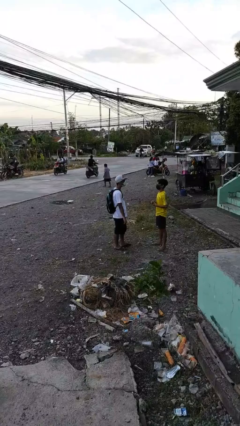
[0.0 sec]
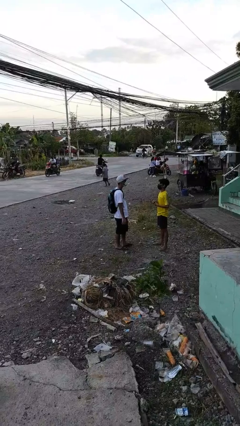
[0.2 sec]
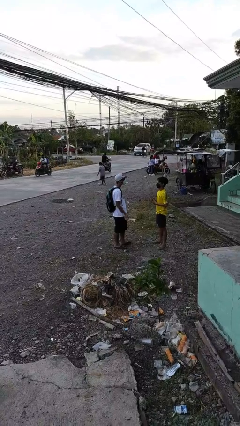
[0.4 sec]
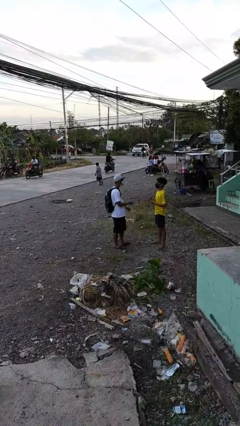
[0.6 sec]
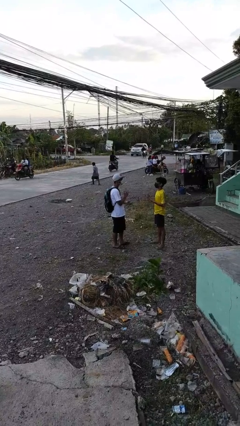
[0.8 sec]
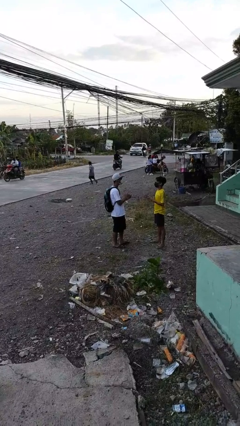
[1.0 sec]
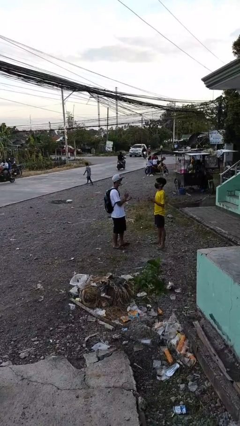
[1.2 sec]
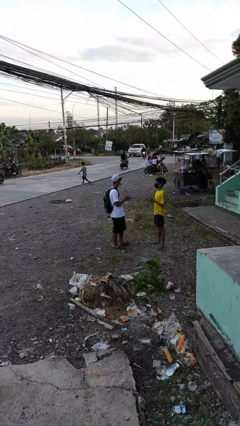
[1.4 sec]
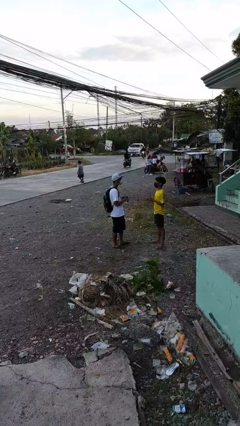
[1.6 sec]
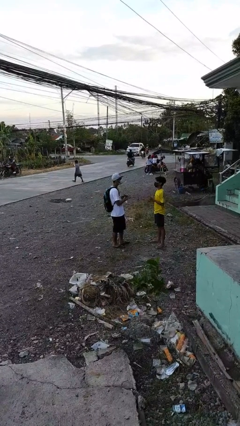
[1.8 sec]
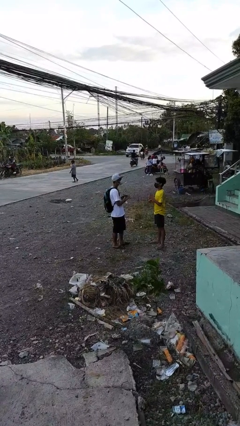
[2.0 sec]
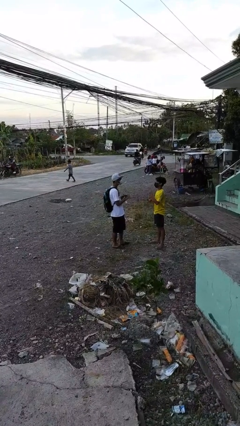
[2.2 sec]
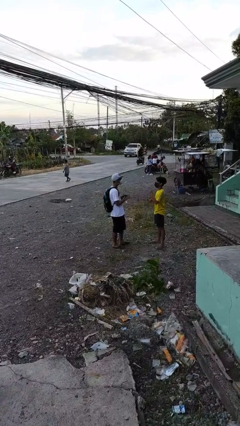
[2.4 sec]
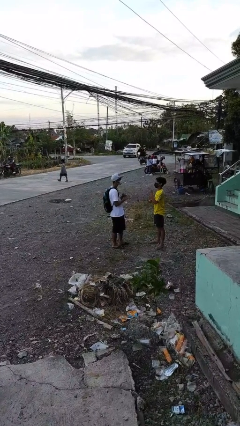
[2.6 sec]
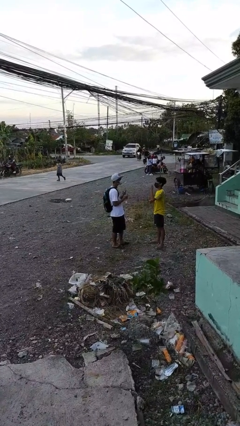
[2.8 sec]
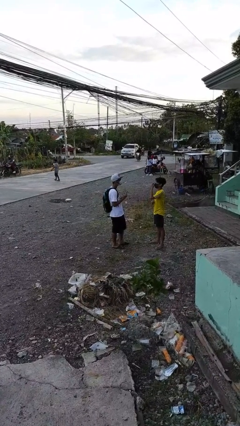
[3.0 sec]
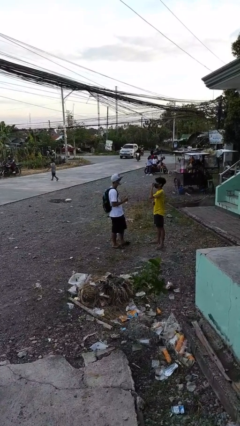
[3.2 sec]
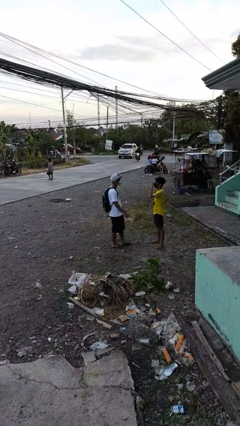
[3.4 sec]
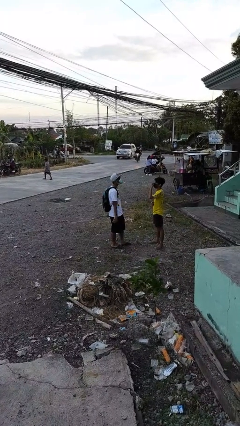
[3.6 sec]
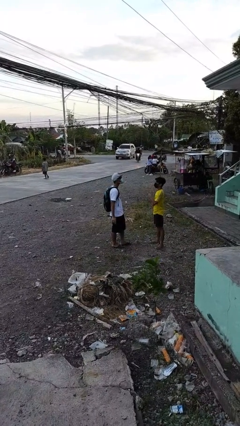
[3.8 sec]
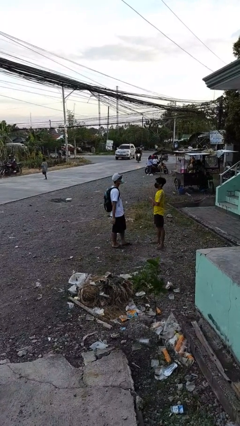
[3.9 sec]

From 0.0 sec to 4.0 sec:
person talks to person

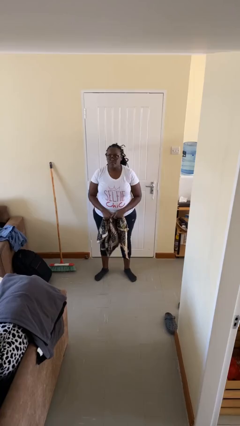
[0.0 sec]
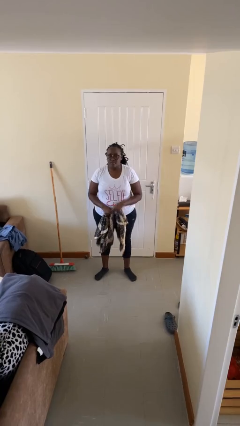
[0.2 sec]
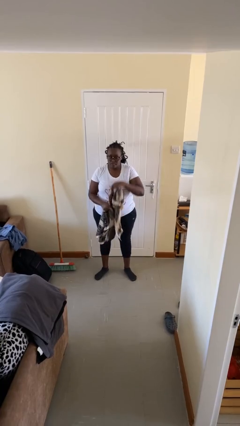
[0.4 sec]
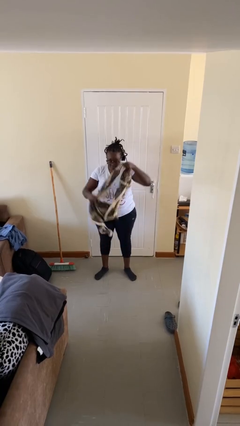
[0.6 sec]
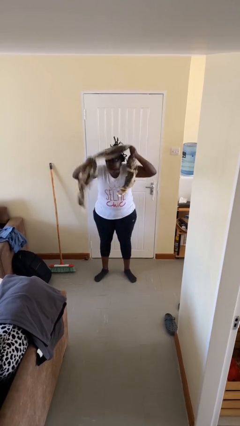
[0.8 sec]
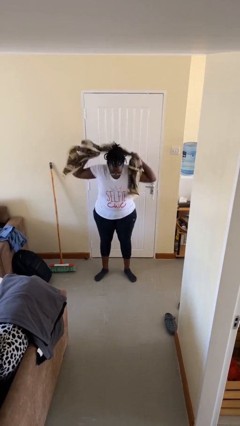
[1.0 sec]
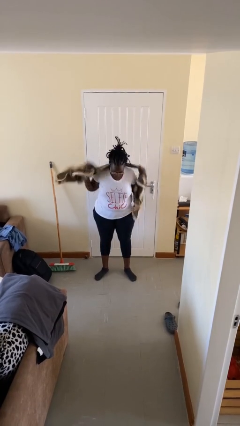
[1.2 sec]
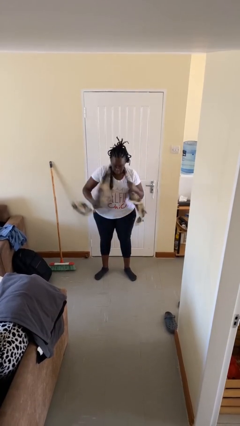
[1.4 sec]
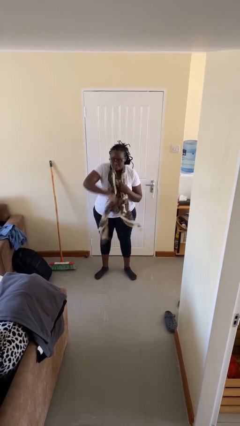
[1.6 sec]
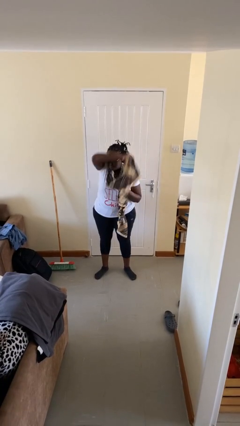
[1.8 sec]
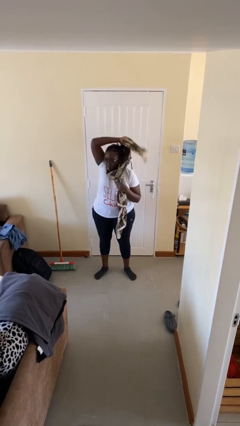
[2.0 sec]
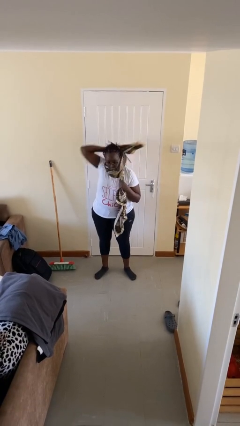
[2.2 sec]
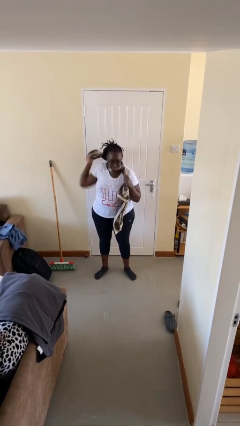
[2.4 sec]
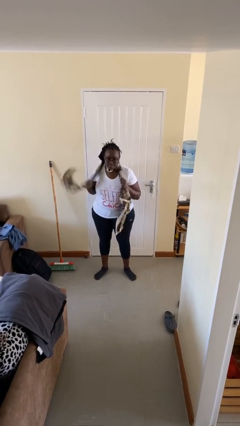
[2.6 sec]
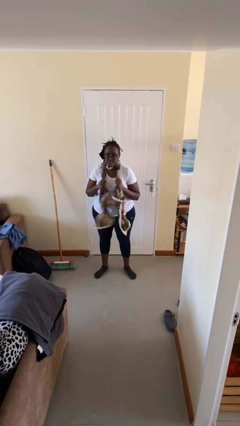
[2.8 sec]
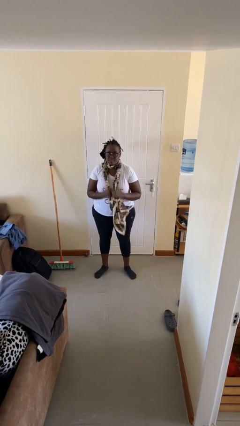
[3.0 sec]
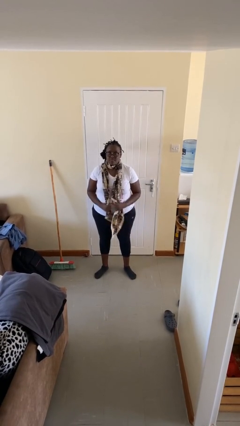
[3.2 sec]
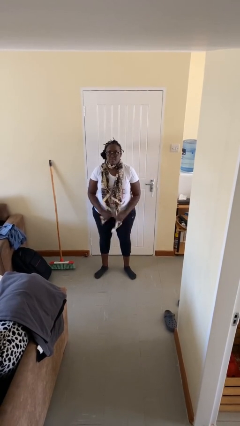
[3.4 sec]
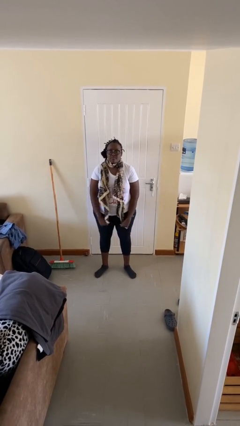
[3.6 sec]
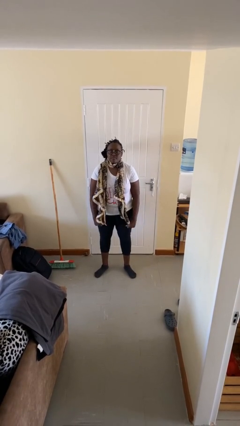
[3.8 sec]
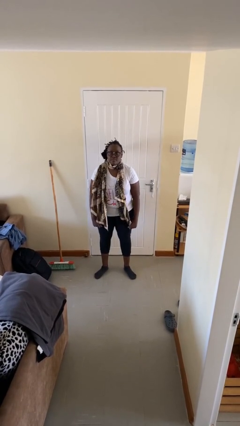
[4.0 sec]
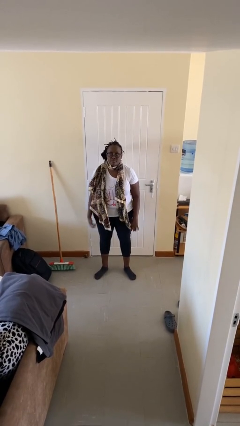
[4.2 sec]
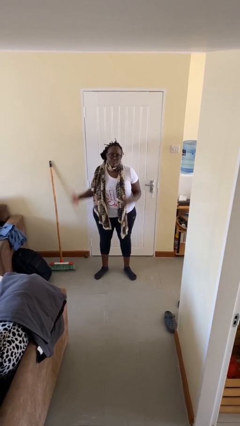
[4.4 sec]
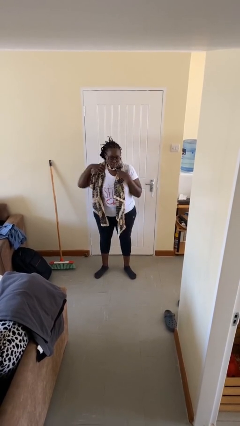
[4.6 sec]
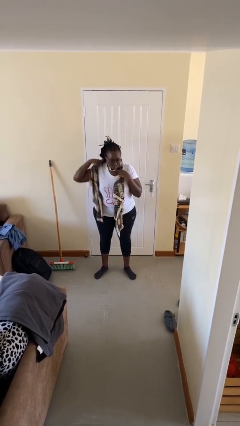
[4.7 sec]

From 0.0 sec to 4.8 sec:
person puts on scarf

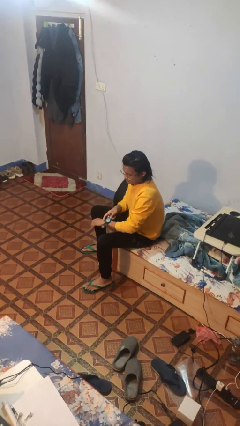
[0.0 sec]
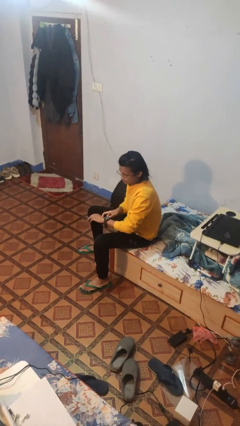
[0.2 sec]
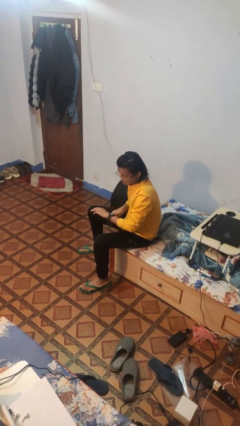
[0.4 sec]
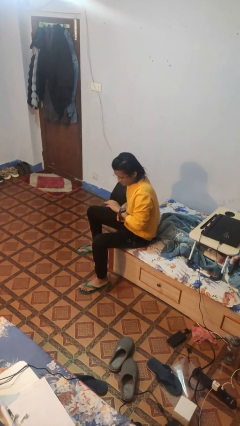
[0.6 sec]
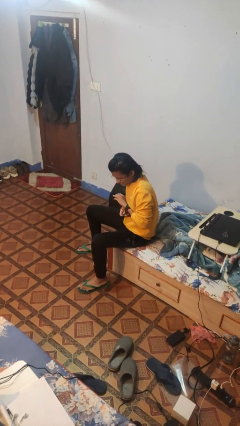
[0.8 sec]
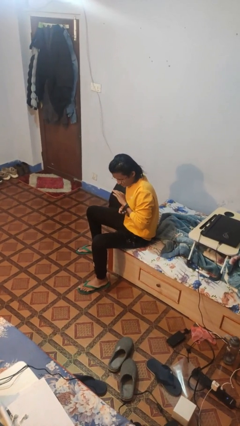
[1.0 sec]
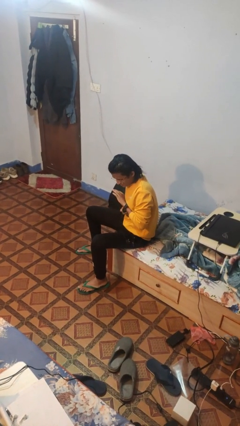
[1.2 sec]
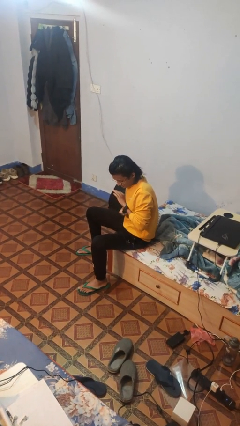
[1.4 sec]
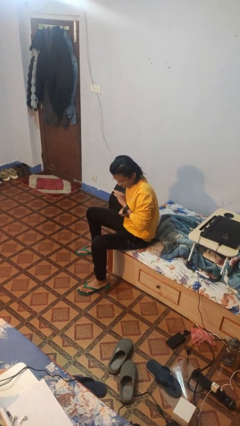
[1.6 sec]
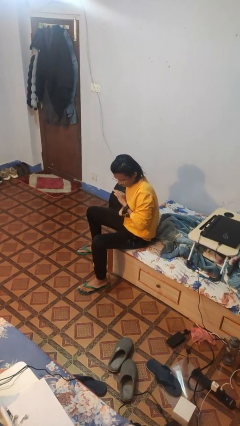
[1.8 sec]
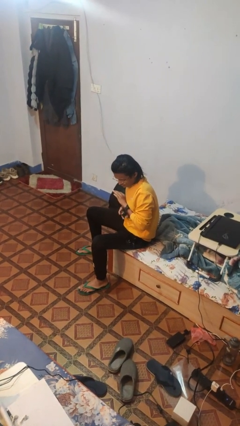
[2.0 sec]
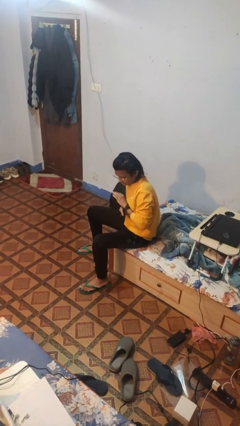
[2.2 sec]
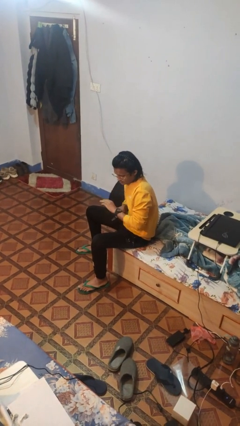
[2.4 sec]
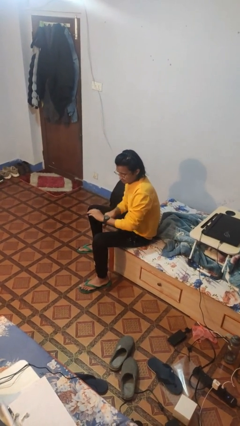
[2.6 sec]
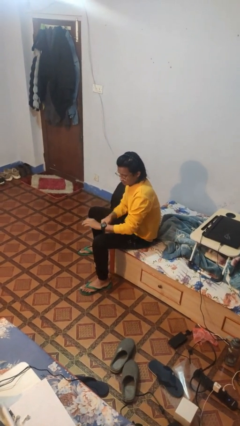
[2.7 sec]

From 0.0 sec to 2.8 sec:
person puts on wristwatch

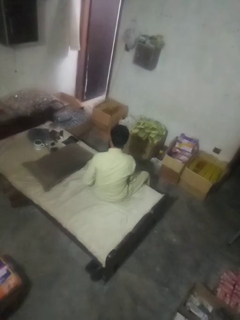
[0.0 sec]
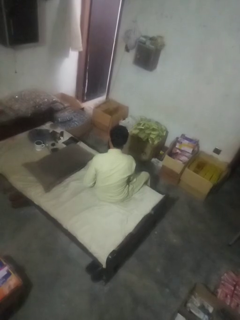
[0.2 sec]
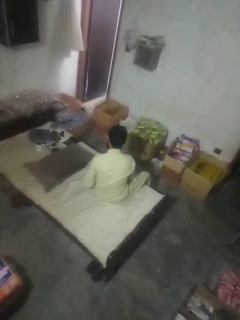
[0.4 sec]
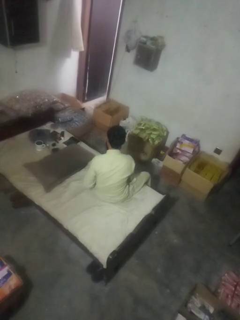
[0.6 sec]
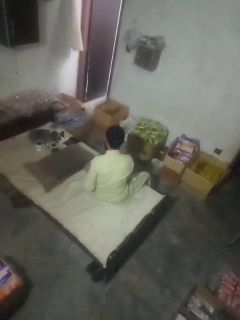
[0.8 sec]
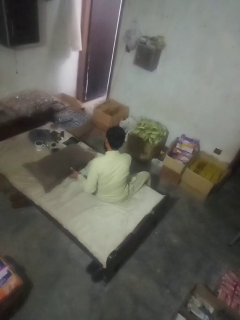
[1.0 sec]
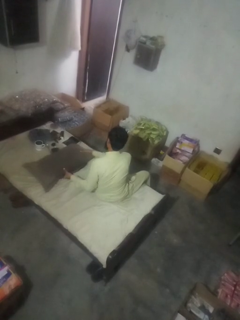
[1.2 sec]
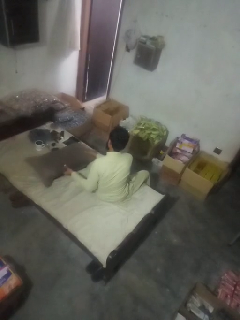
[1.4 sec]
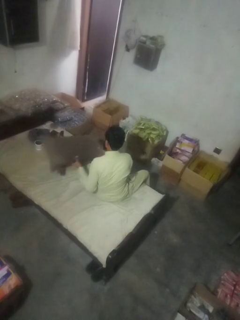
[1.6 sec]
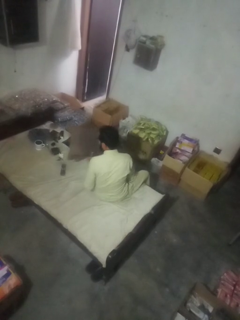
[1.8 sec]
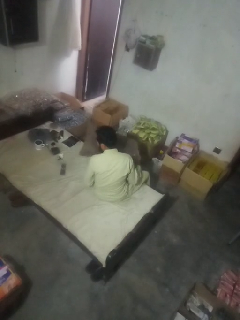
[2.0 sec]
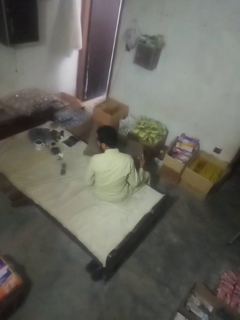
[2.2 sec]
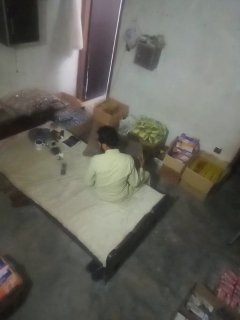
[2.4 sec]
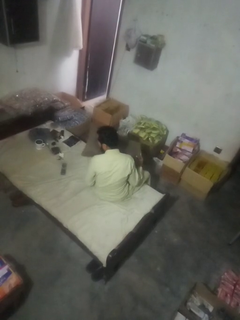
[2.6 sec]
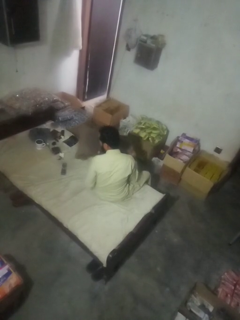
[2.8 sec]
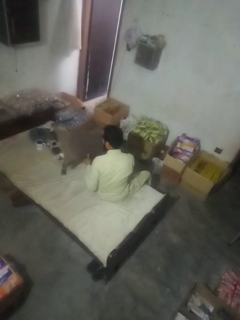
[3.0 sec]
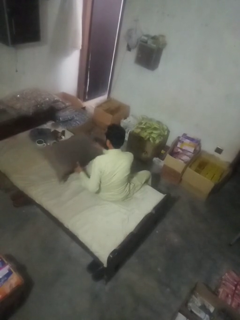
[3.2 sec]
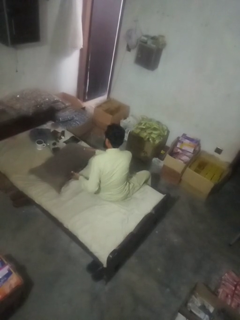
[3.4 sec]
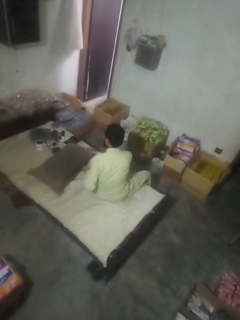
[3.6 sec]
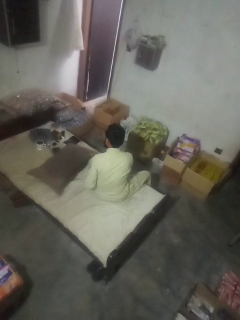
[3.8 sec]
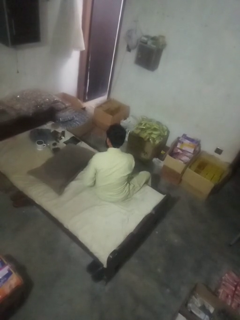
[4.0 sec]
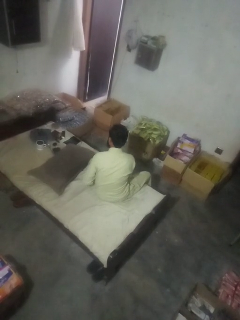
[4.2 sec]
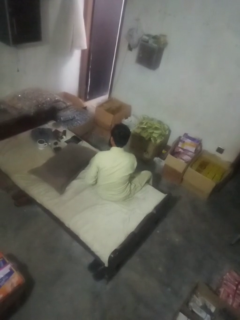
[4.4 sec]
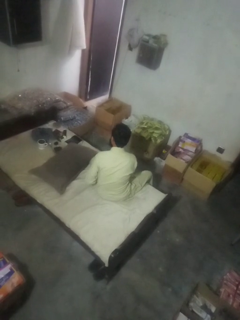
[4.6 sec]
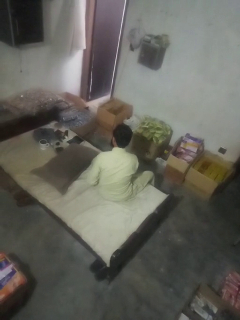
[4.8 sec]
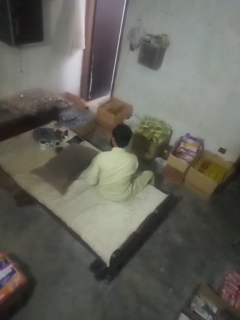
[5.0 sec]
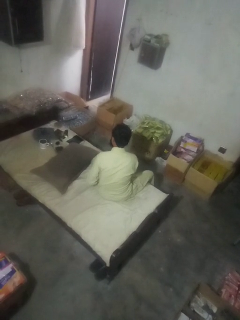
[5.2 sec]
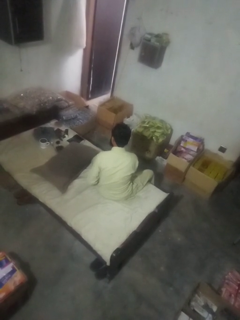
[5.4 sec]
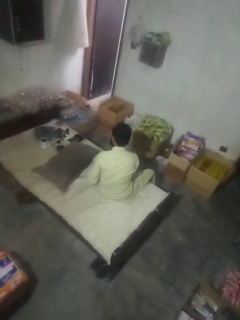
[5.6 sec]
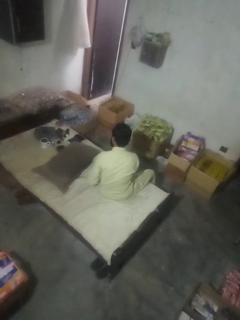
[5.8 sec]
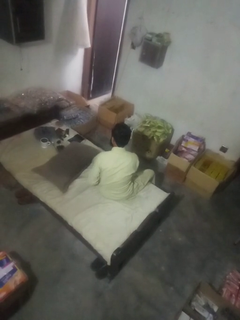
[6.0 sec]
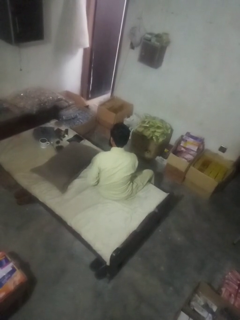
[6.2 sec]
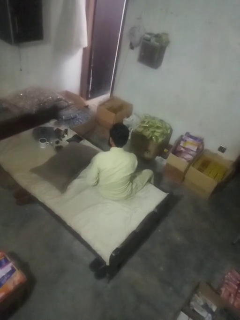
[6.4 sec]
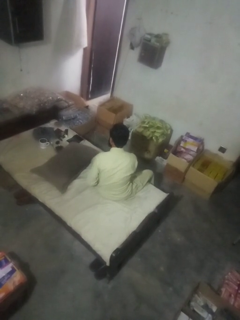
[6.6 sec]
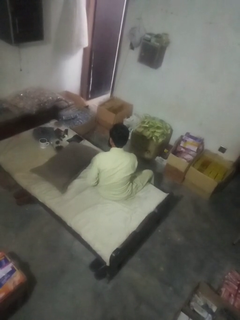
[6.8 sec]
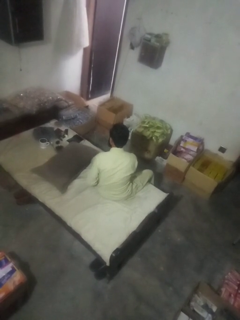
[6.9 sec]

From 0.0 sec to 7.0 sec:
person searches in couch

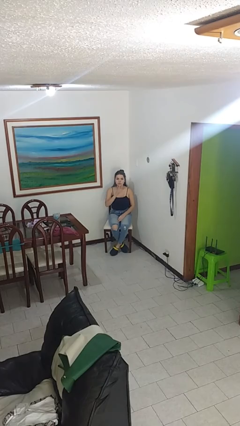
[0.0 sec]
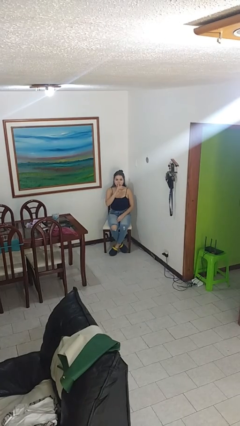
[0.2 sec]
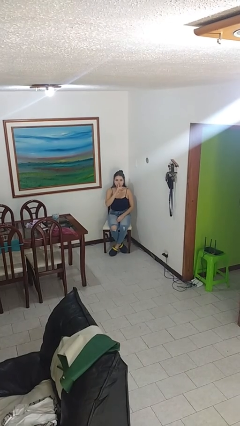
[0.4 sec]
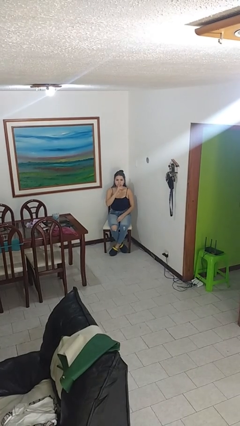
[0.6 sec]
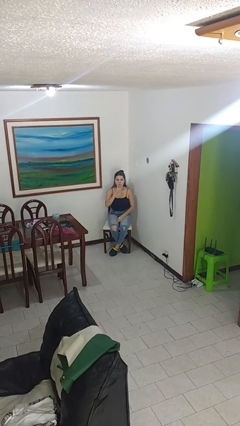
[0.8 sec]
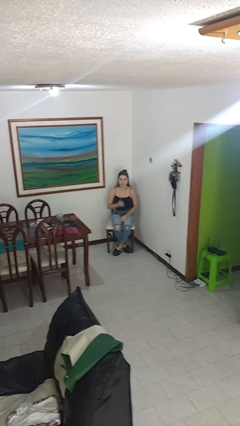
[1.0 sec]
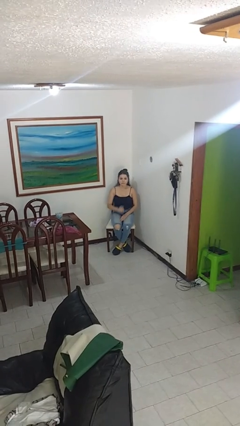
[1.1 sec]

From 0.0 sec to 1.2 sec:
person gestures be quiet
